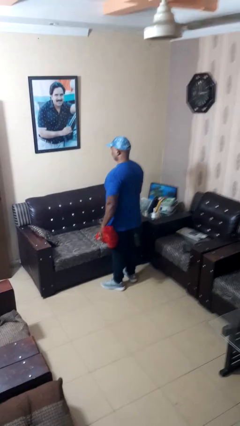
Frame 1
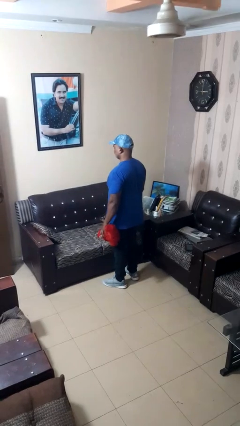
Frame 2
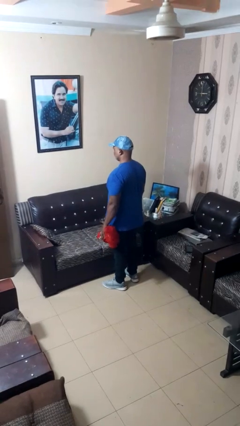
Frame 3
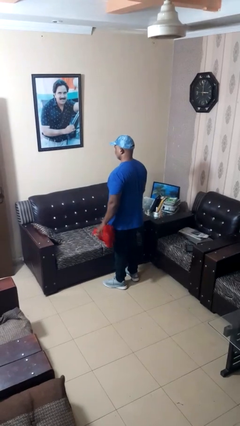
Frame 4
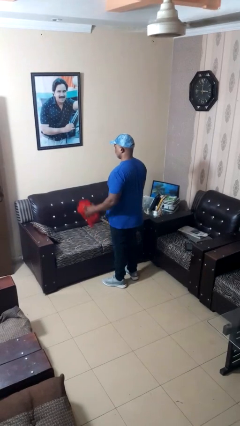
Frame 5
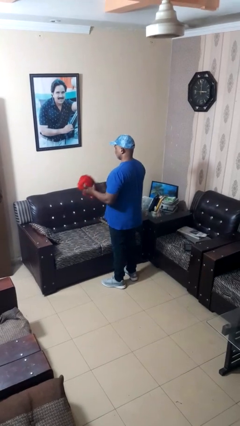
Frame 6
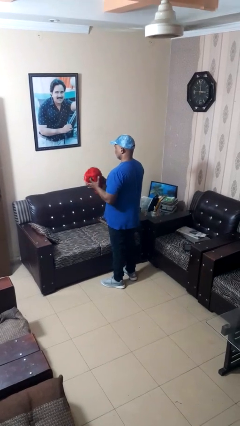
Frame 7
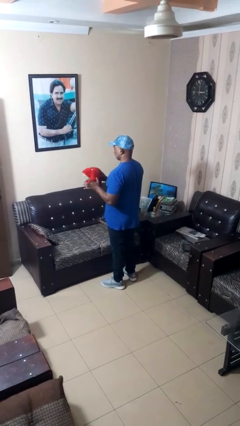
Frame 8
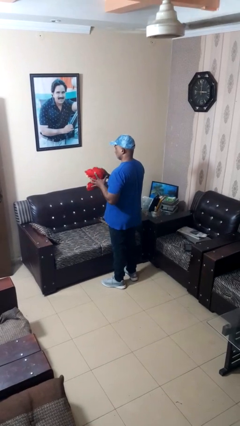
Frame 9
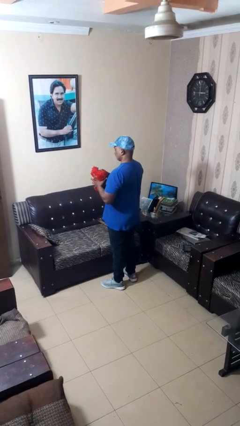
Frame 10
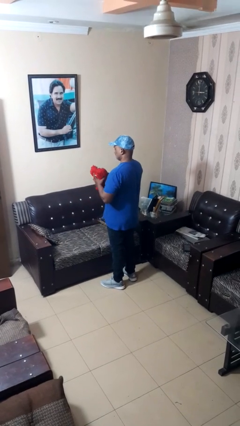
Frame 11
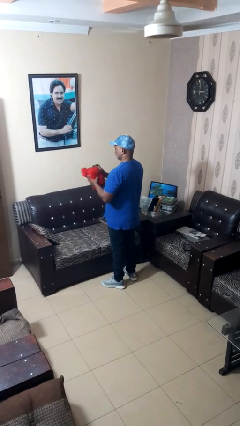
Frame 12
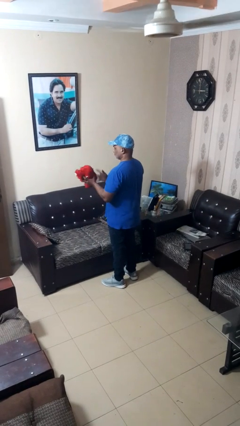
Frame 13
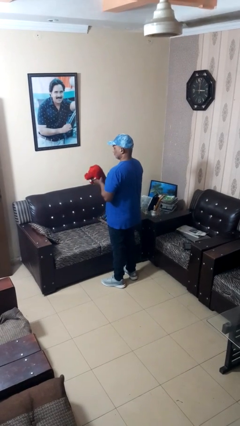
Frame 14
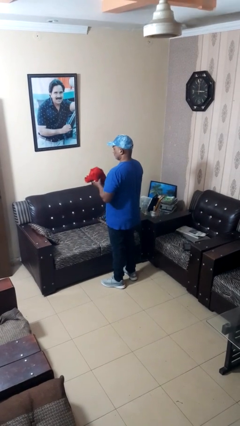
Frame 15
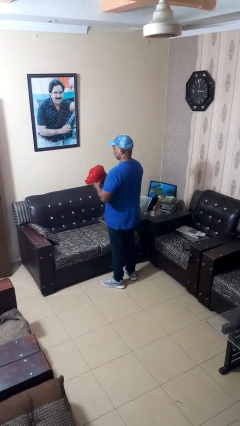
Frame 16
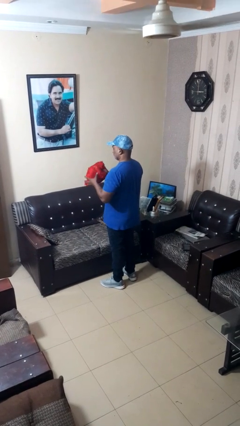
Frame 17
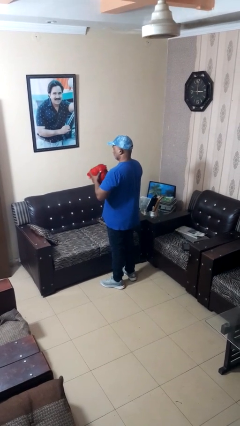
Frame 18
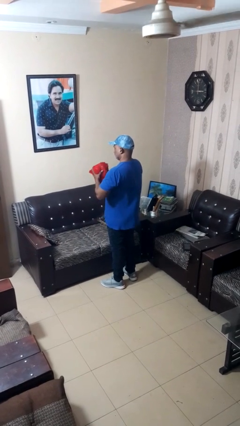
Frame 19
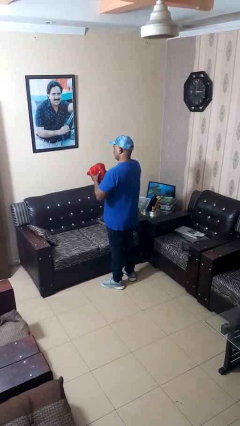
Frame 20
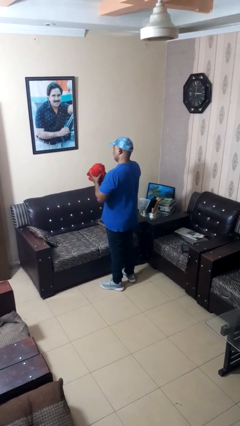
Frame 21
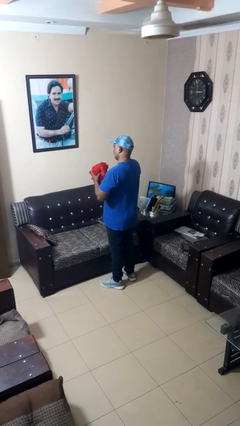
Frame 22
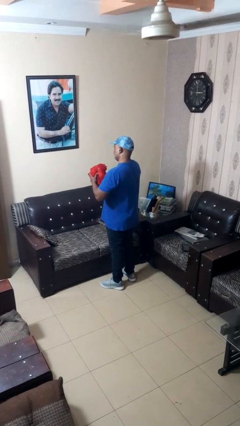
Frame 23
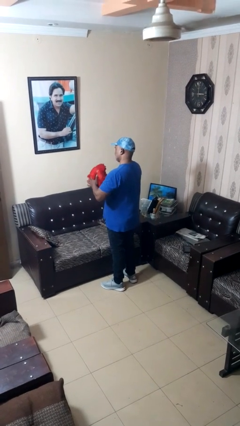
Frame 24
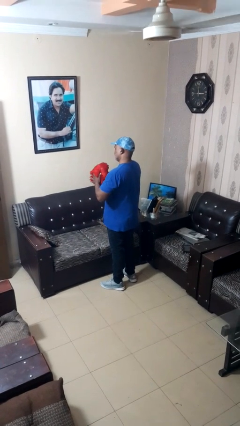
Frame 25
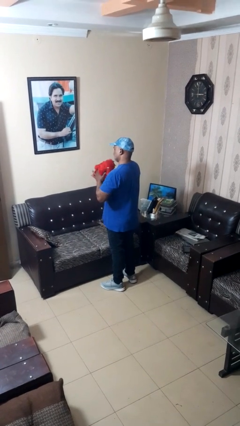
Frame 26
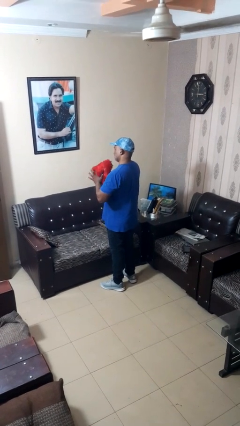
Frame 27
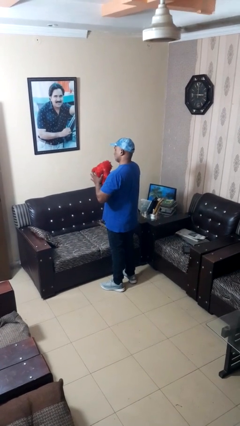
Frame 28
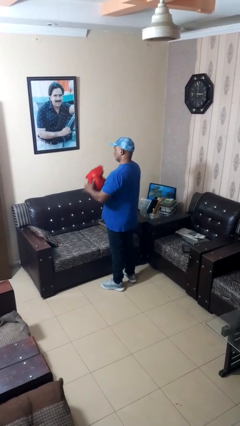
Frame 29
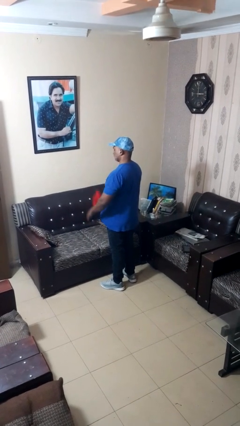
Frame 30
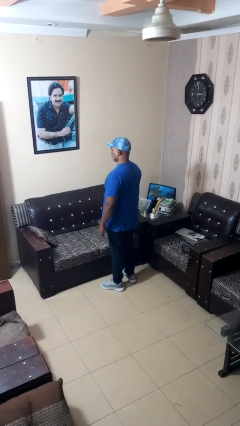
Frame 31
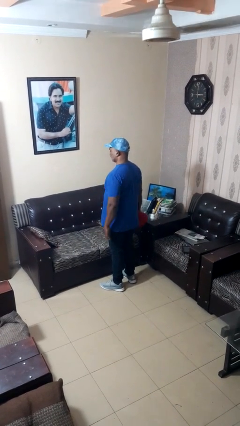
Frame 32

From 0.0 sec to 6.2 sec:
person squeezes object

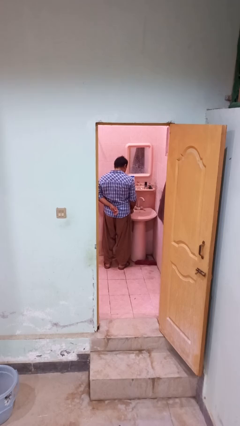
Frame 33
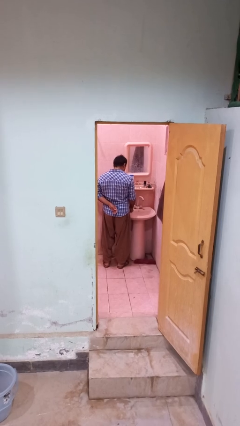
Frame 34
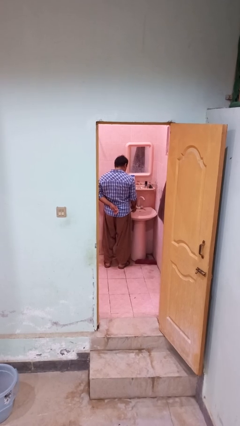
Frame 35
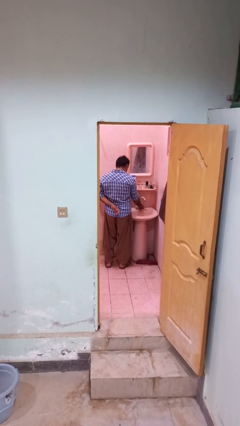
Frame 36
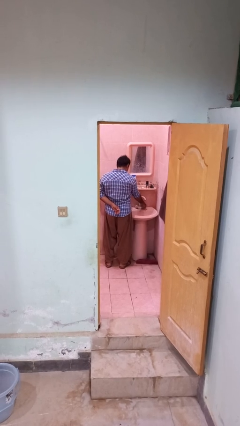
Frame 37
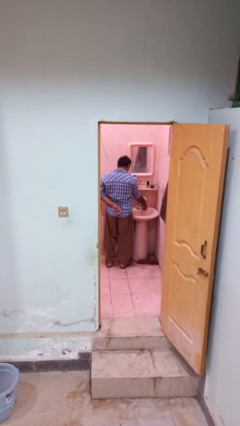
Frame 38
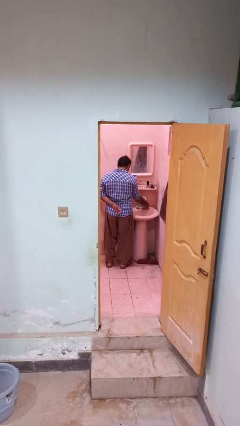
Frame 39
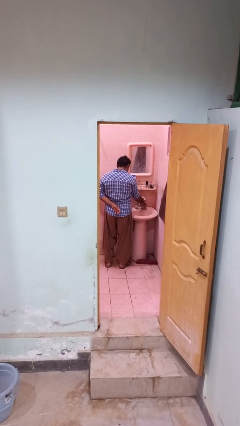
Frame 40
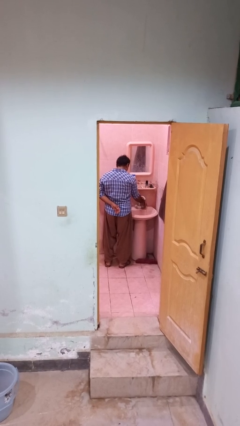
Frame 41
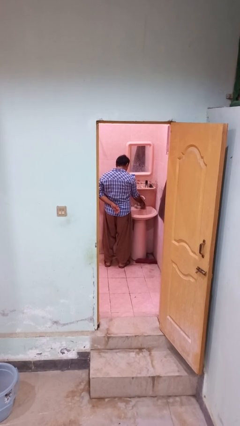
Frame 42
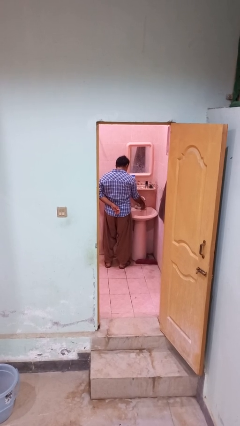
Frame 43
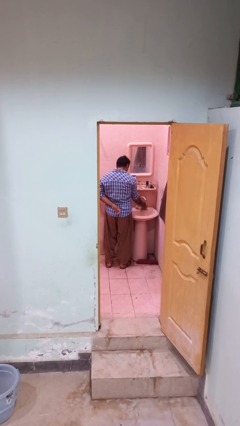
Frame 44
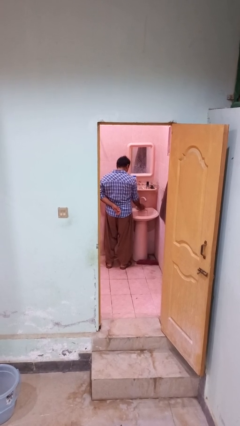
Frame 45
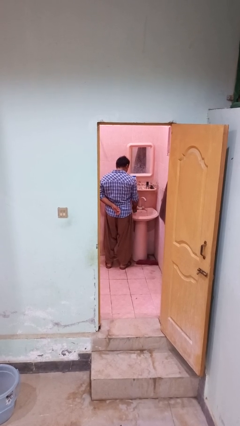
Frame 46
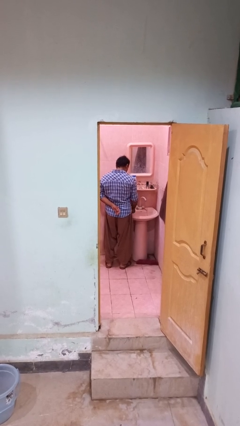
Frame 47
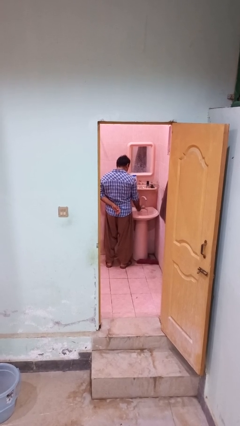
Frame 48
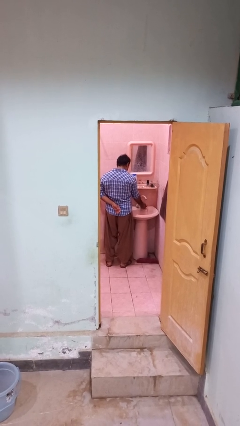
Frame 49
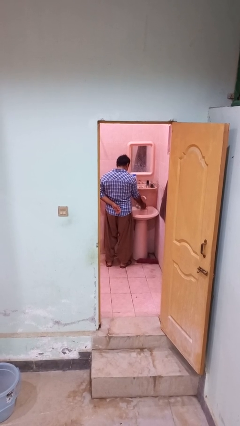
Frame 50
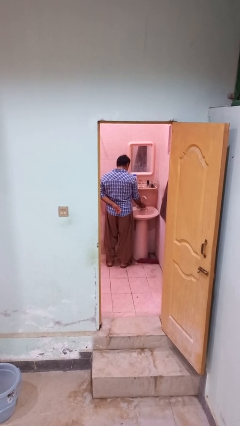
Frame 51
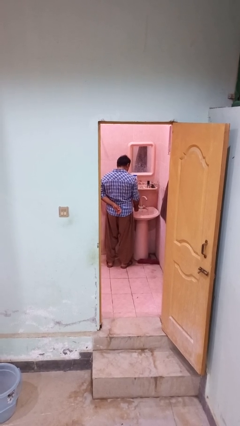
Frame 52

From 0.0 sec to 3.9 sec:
person turns on faucet

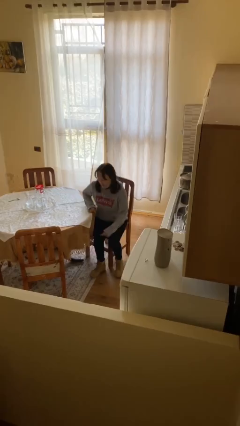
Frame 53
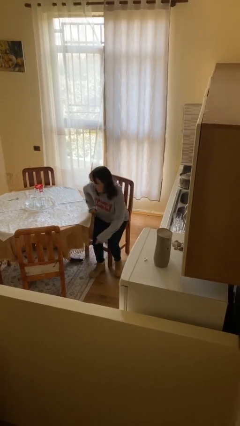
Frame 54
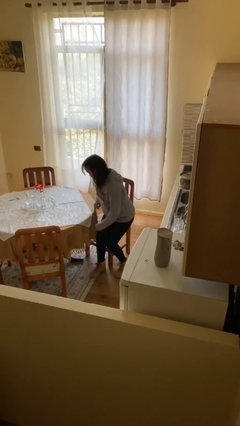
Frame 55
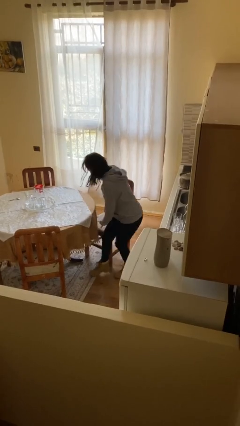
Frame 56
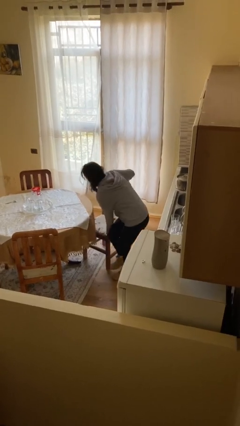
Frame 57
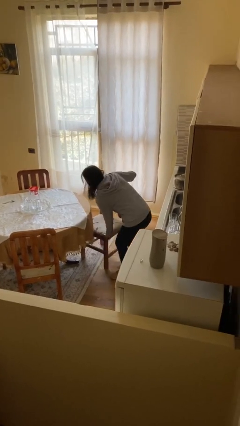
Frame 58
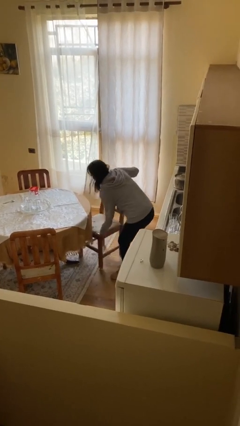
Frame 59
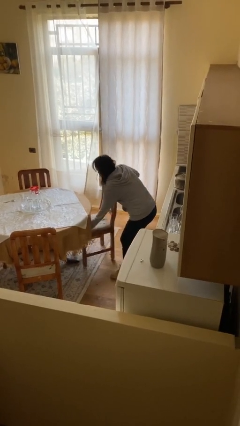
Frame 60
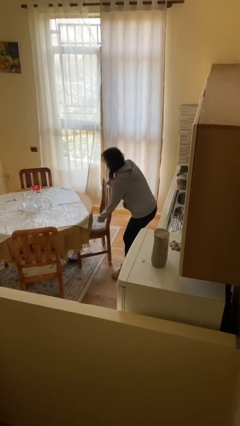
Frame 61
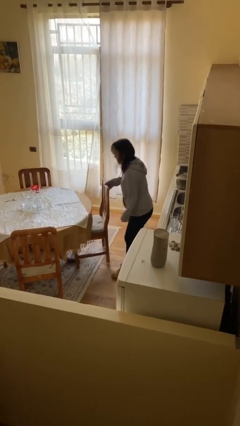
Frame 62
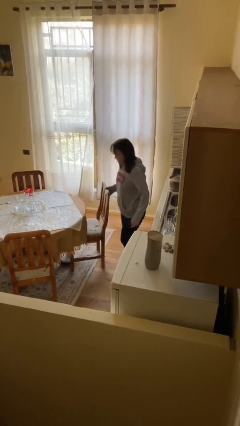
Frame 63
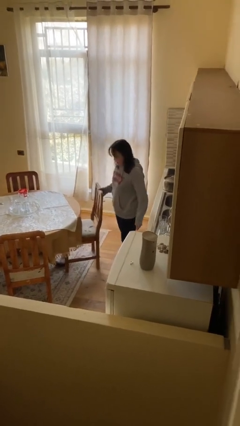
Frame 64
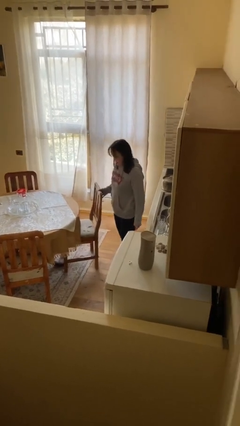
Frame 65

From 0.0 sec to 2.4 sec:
person stands up

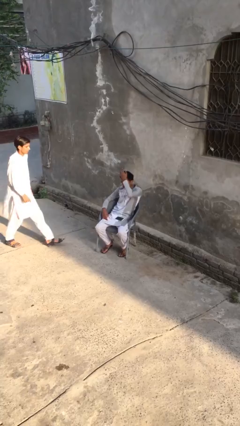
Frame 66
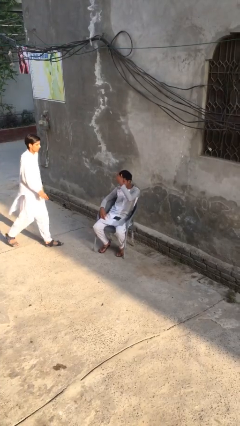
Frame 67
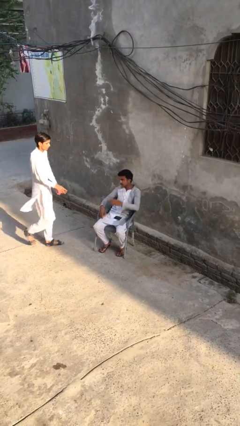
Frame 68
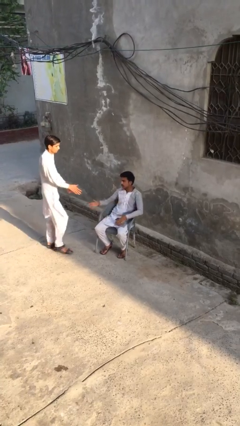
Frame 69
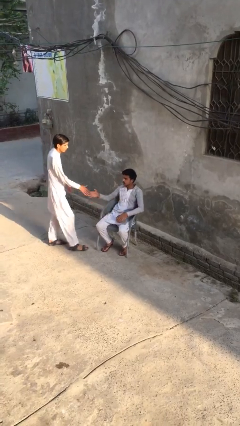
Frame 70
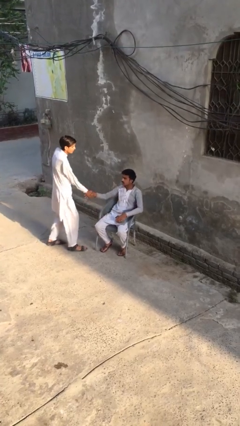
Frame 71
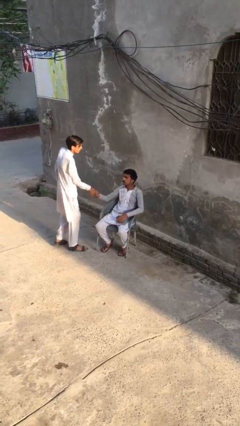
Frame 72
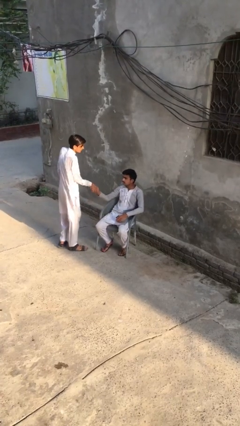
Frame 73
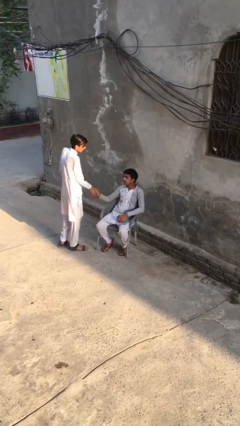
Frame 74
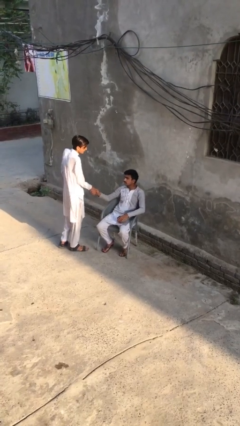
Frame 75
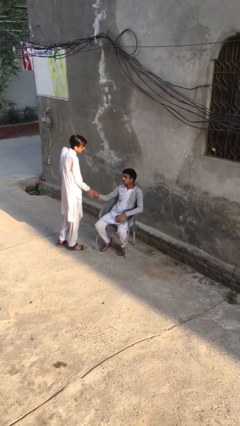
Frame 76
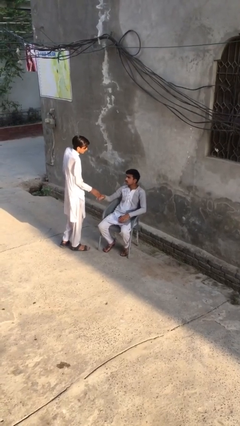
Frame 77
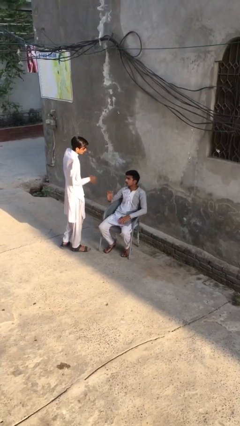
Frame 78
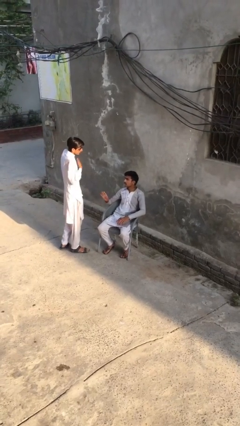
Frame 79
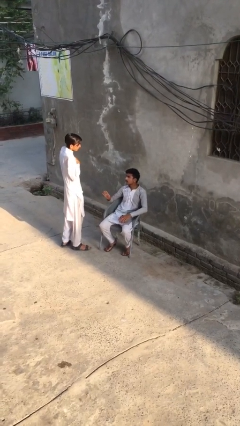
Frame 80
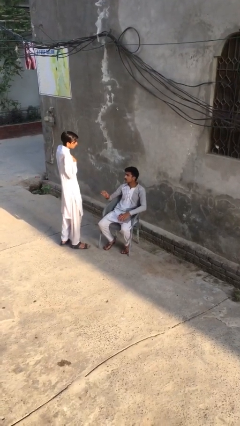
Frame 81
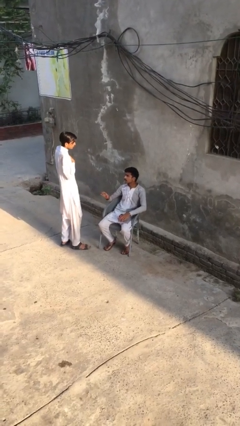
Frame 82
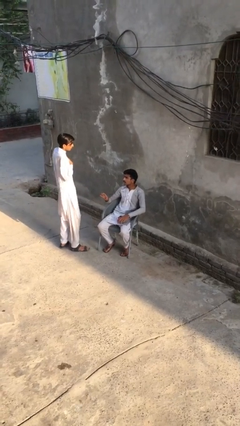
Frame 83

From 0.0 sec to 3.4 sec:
person shakes hand

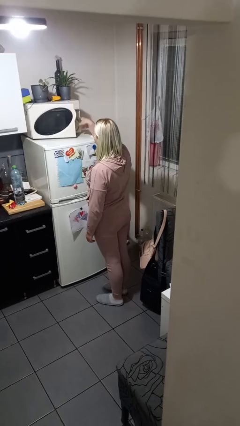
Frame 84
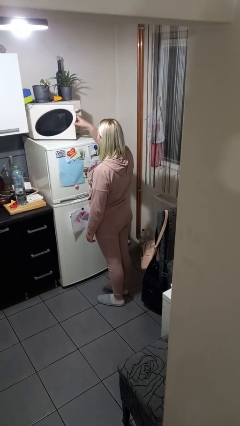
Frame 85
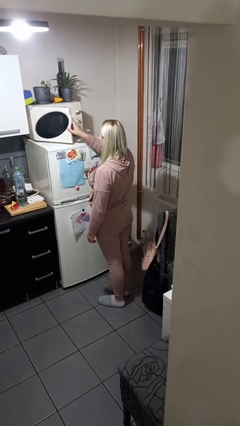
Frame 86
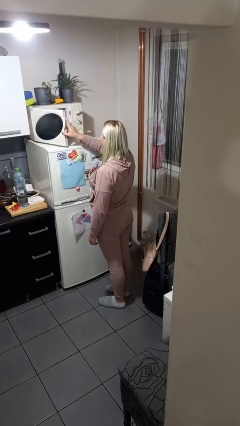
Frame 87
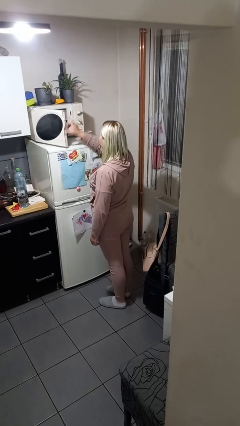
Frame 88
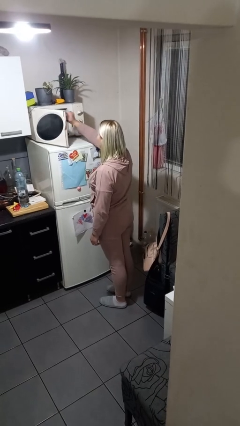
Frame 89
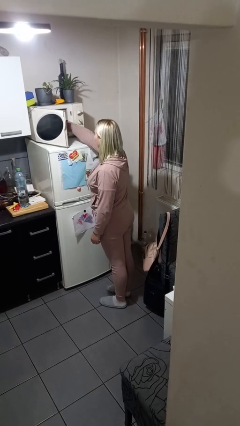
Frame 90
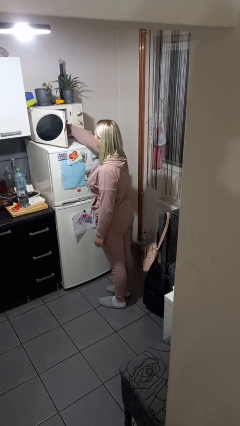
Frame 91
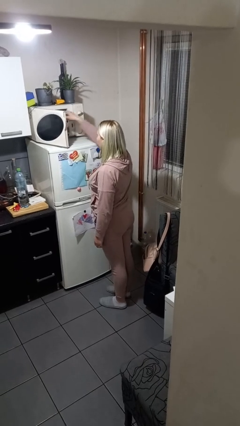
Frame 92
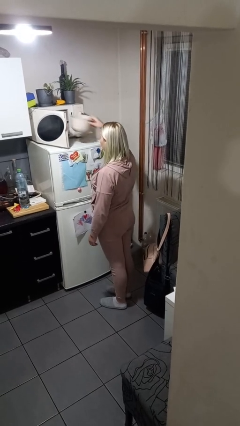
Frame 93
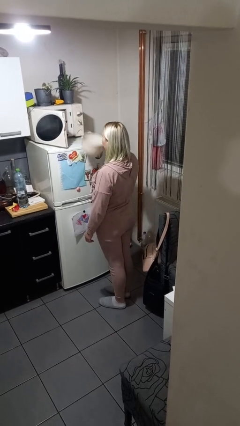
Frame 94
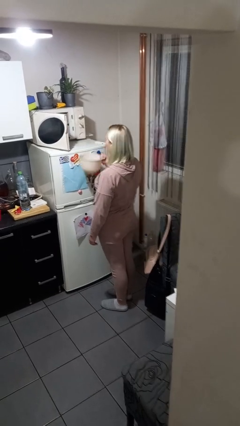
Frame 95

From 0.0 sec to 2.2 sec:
person takes object from microwave

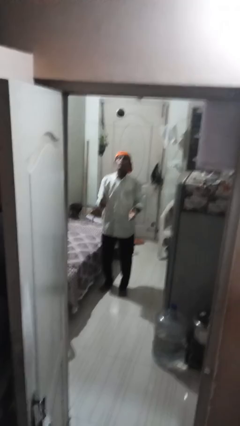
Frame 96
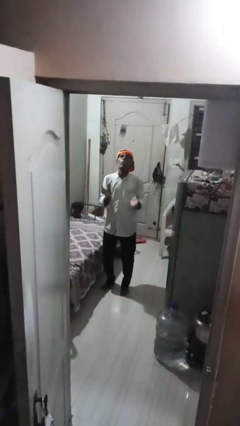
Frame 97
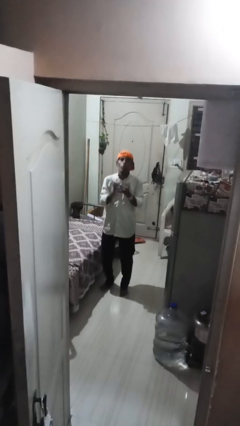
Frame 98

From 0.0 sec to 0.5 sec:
person drops object
